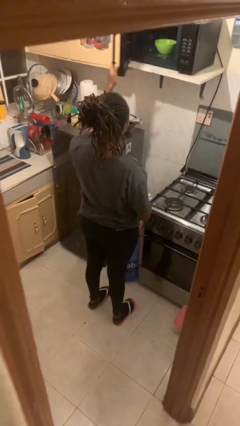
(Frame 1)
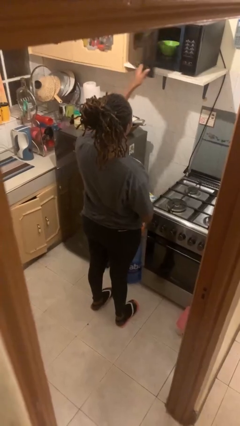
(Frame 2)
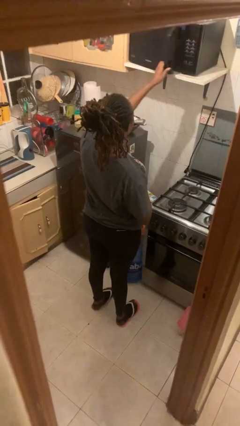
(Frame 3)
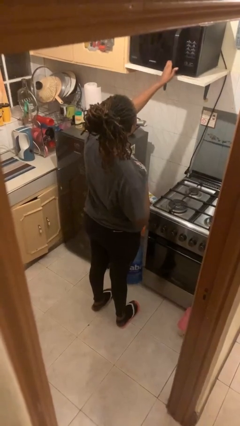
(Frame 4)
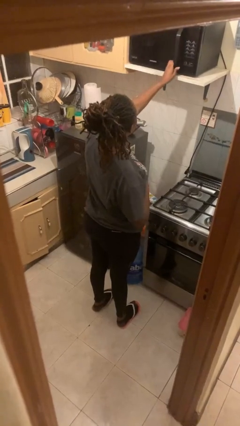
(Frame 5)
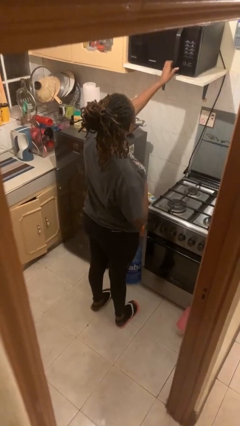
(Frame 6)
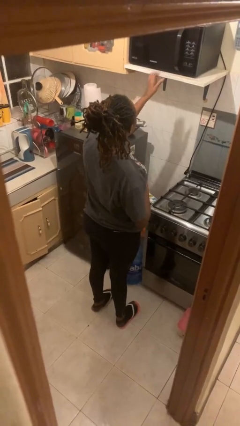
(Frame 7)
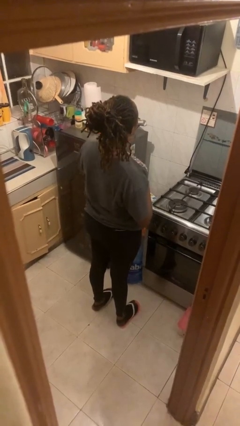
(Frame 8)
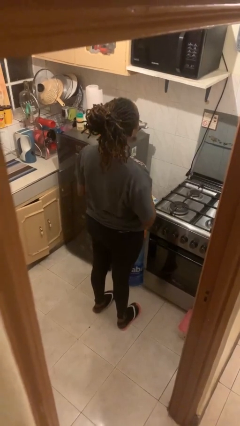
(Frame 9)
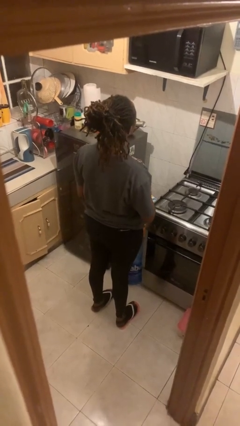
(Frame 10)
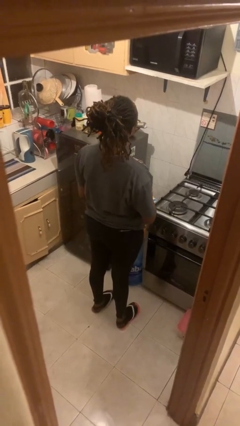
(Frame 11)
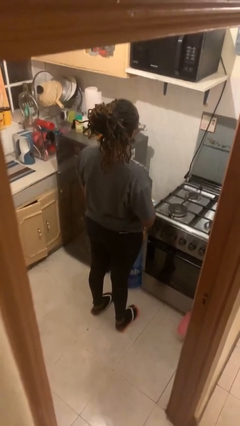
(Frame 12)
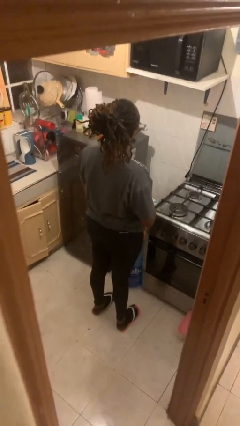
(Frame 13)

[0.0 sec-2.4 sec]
person closes microwave

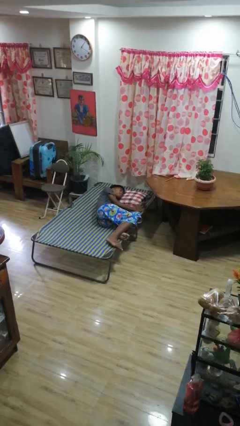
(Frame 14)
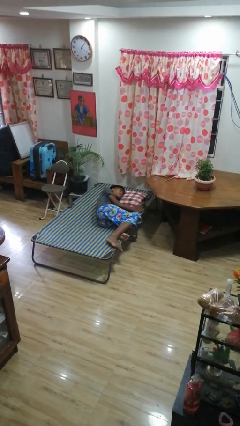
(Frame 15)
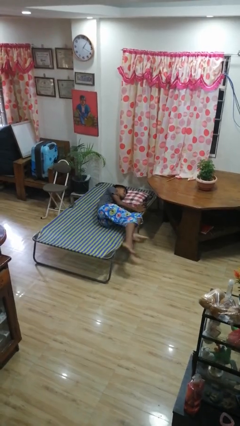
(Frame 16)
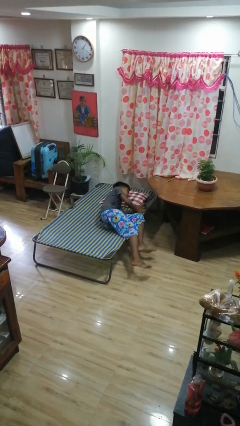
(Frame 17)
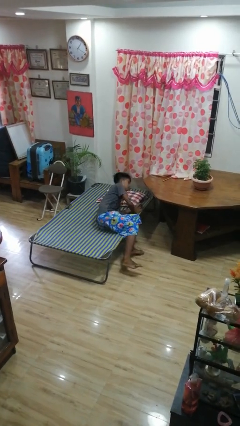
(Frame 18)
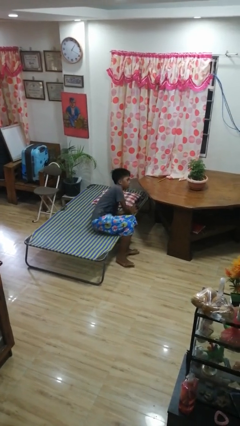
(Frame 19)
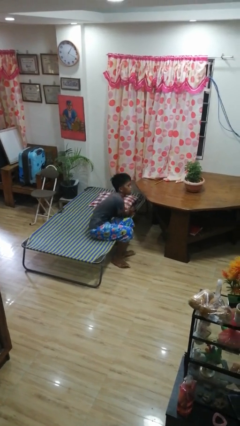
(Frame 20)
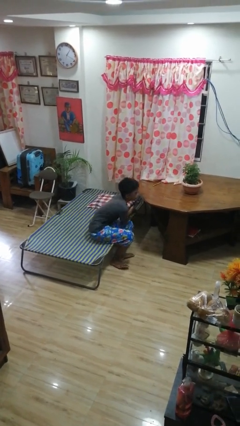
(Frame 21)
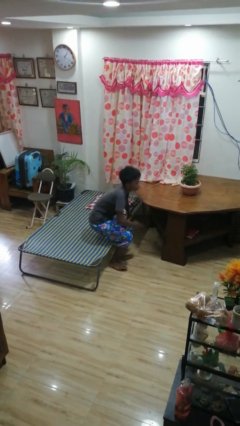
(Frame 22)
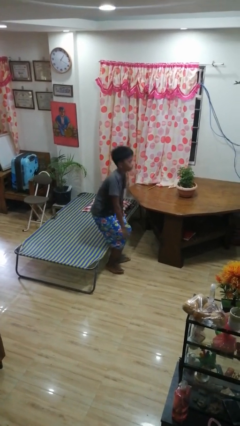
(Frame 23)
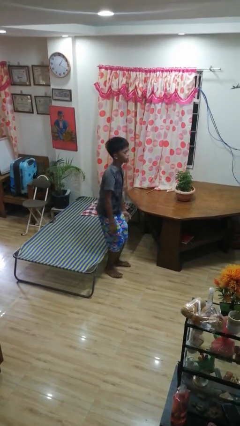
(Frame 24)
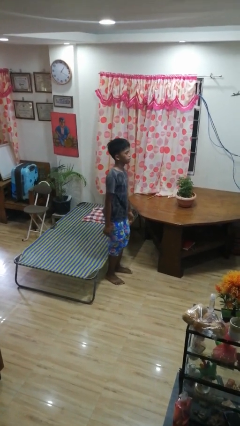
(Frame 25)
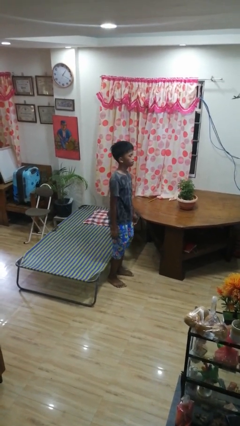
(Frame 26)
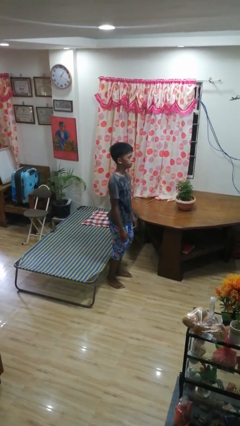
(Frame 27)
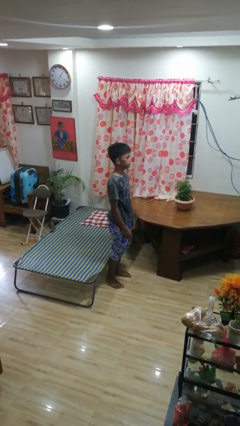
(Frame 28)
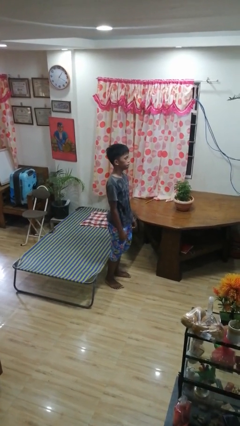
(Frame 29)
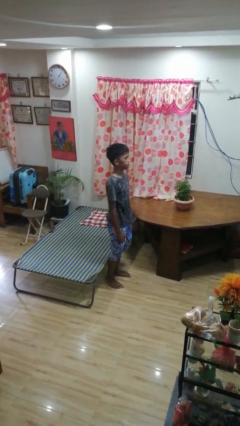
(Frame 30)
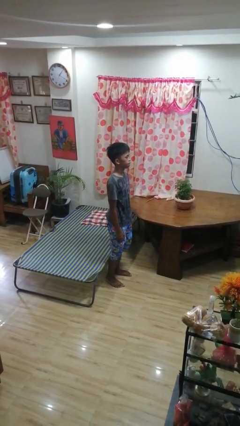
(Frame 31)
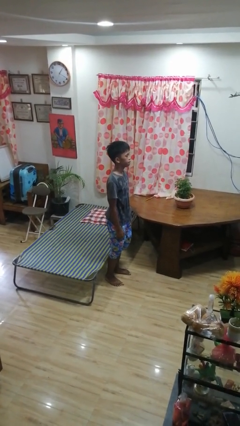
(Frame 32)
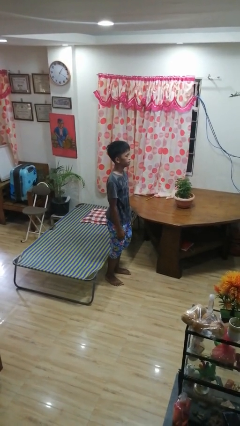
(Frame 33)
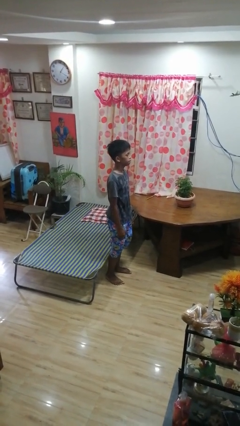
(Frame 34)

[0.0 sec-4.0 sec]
person stands up

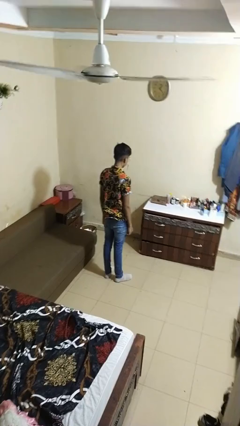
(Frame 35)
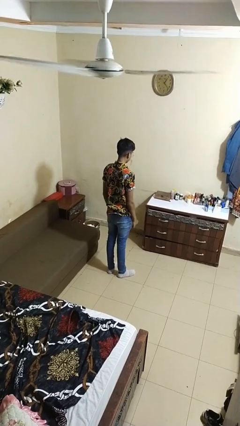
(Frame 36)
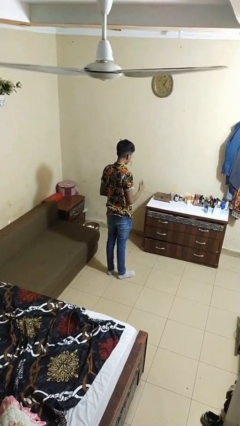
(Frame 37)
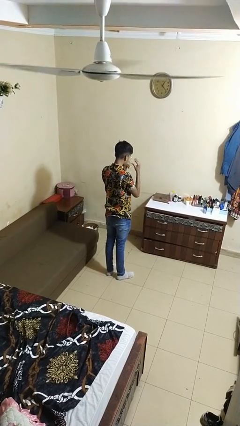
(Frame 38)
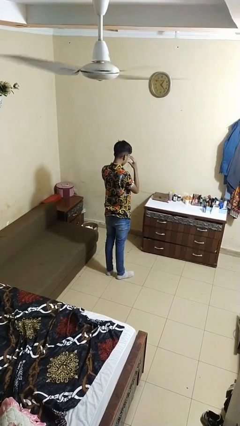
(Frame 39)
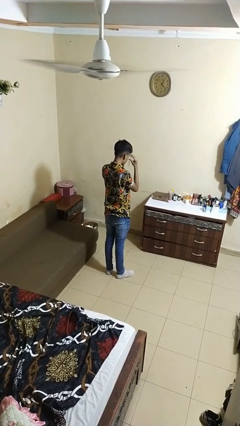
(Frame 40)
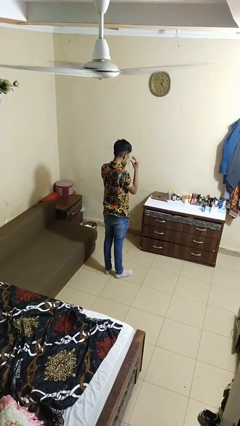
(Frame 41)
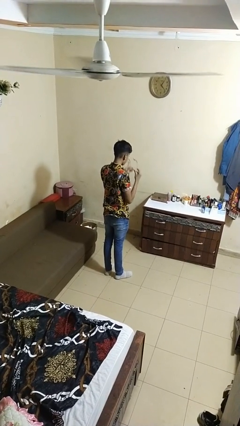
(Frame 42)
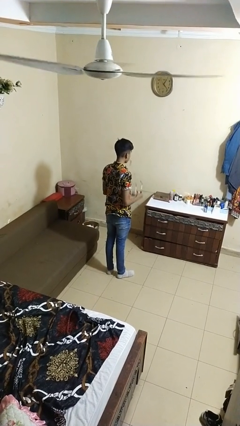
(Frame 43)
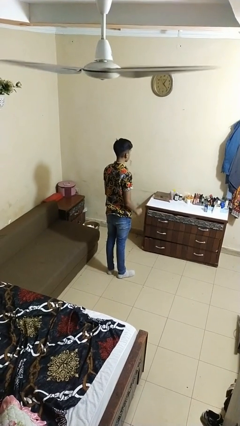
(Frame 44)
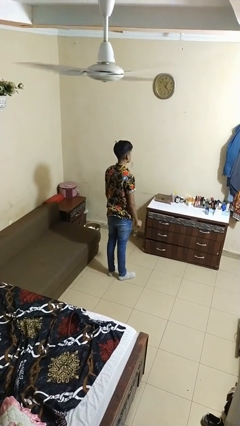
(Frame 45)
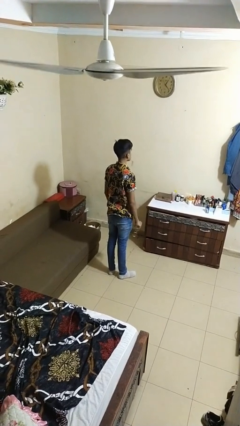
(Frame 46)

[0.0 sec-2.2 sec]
person takes off glasses

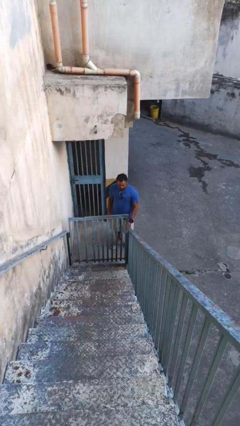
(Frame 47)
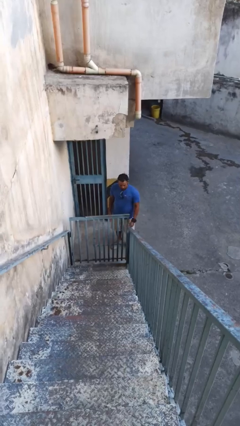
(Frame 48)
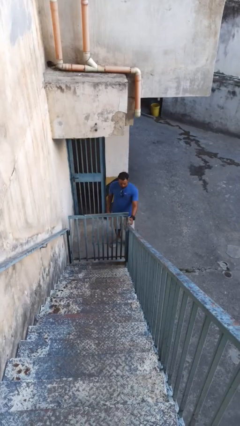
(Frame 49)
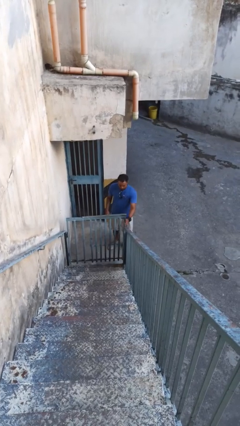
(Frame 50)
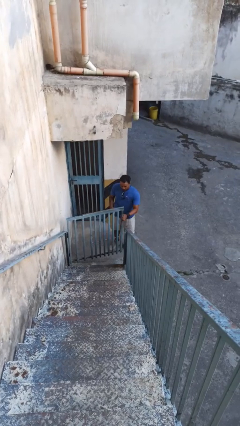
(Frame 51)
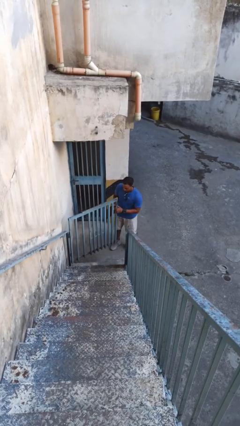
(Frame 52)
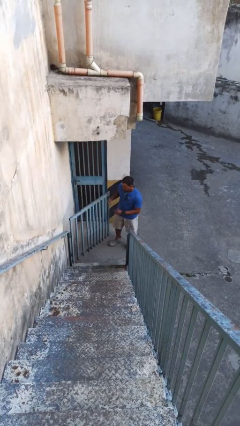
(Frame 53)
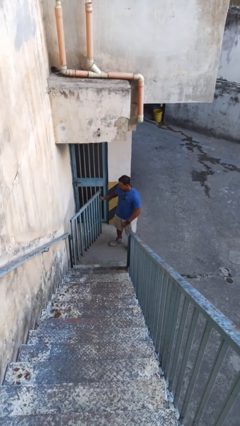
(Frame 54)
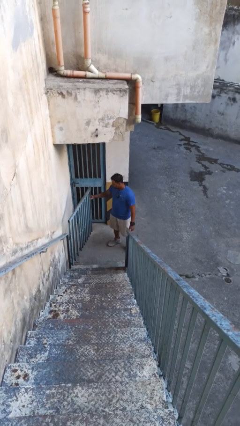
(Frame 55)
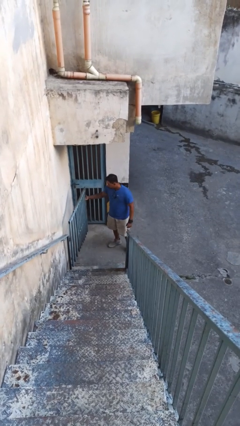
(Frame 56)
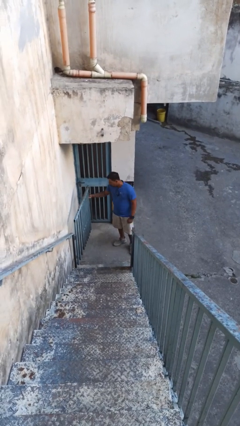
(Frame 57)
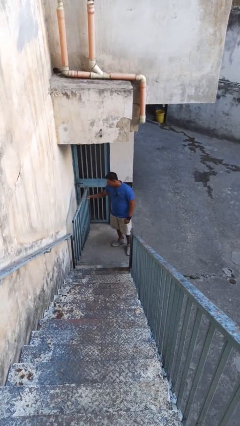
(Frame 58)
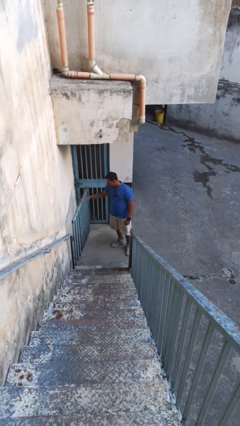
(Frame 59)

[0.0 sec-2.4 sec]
person opens facility door

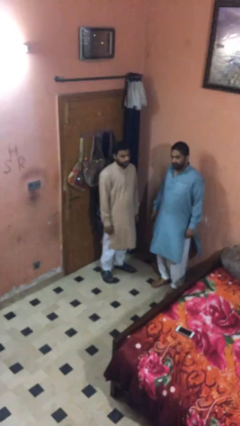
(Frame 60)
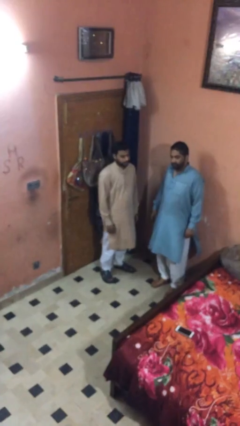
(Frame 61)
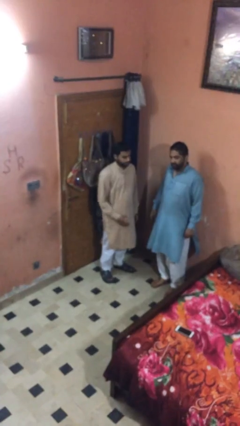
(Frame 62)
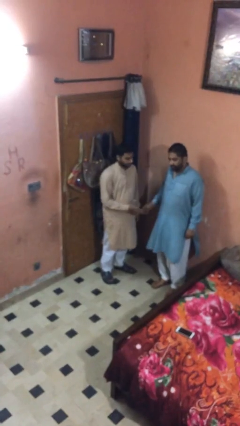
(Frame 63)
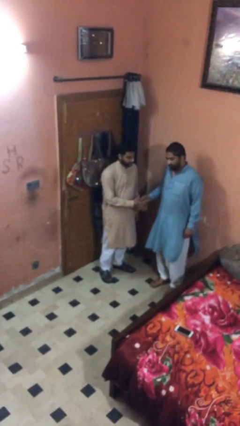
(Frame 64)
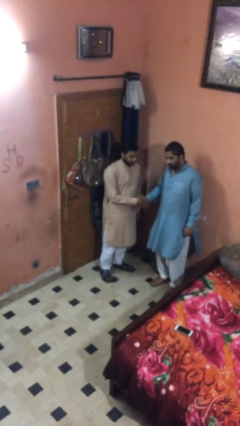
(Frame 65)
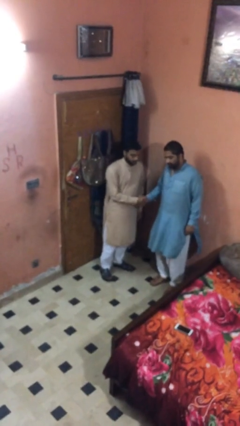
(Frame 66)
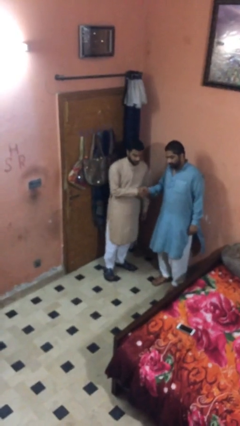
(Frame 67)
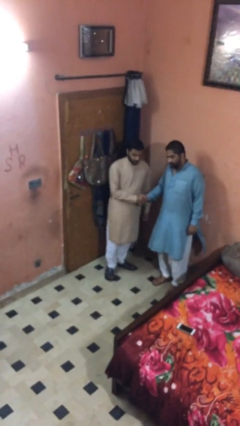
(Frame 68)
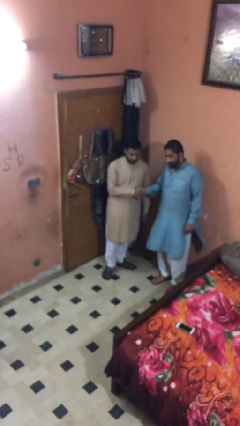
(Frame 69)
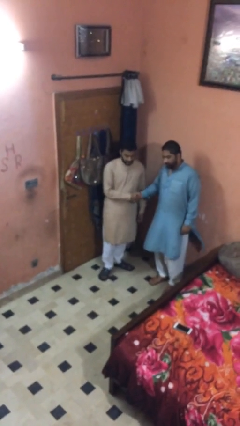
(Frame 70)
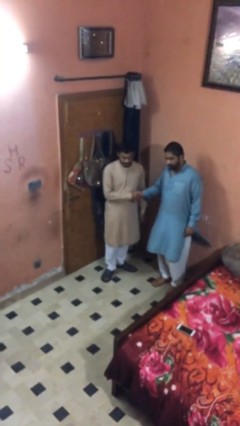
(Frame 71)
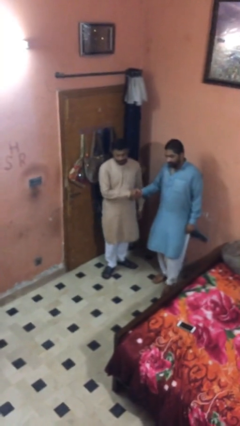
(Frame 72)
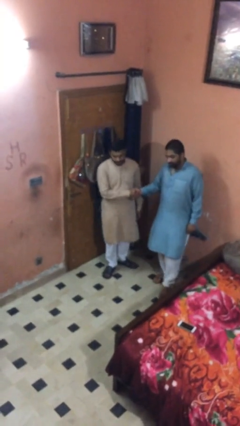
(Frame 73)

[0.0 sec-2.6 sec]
person shakes hand

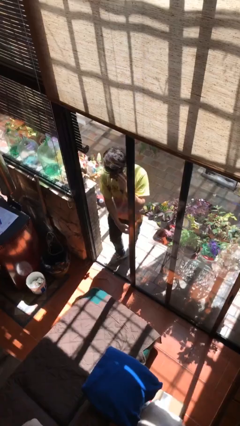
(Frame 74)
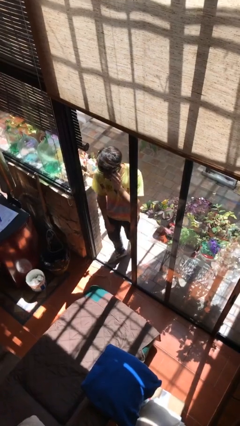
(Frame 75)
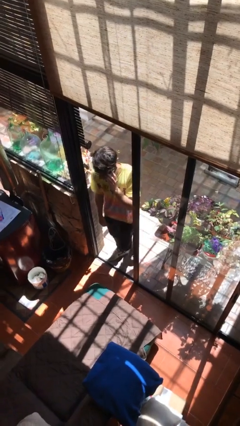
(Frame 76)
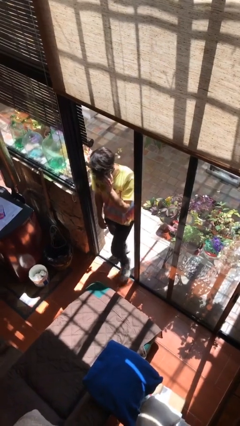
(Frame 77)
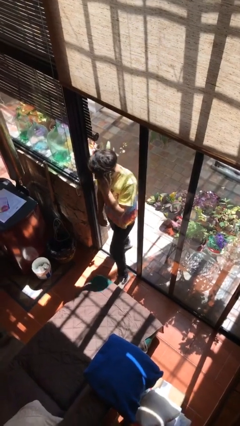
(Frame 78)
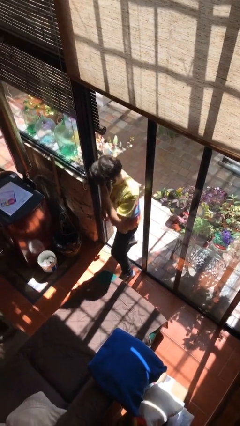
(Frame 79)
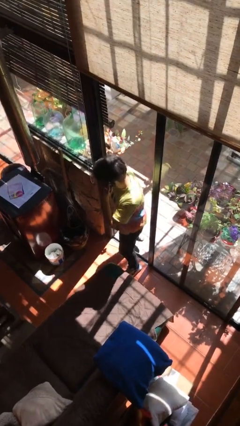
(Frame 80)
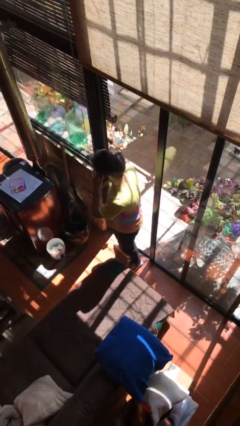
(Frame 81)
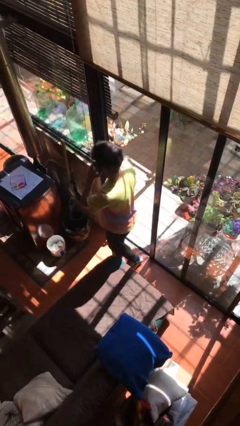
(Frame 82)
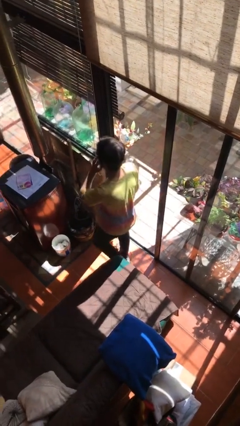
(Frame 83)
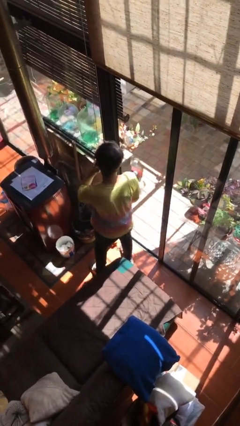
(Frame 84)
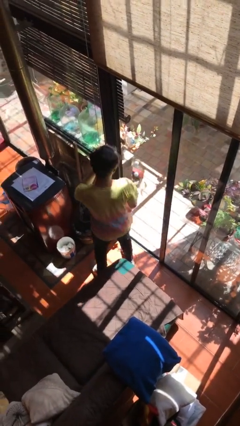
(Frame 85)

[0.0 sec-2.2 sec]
person enters scene through structure

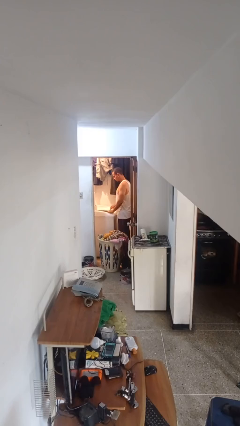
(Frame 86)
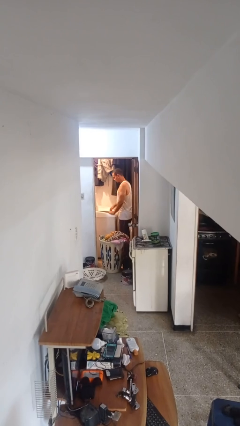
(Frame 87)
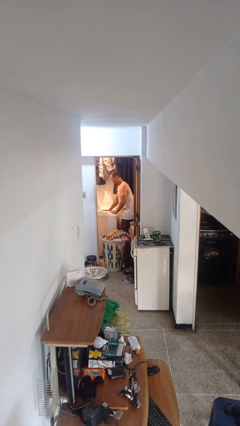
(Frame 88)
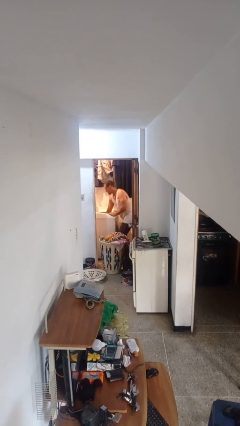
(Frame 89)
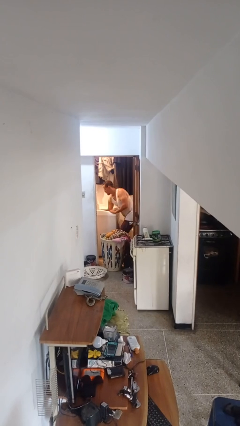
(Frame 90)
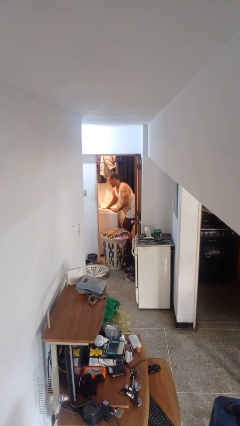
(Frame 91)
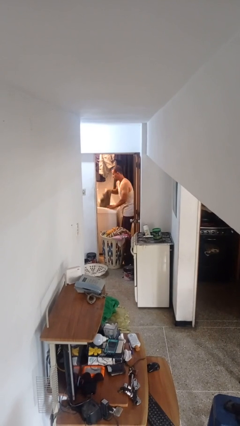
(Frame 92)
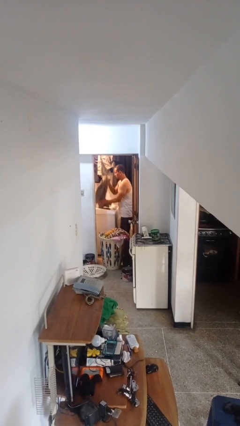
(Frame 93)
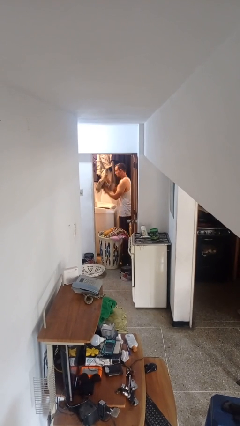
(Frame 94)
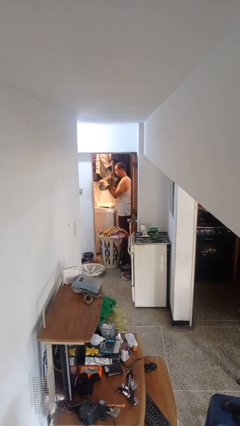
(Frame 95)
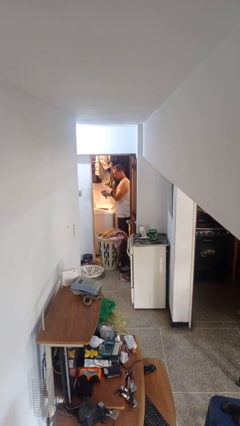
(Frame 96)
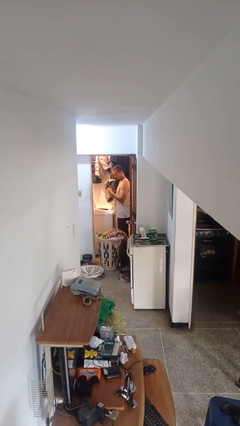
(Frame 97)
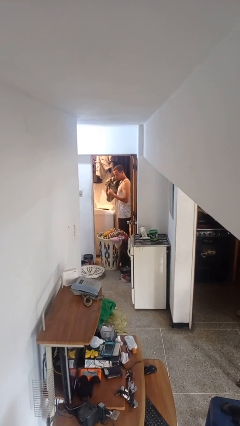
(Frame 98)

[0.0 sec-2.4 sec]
person unloads clotheswasher
